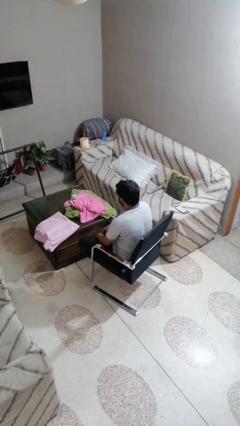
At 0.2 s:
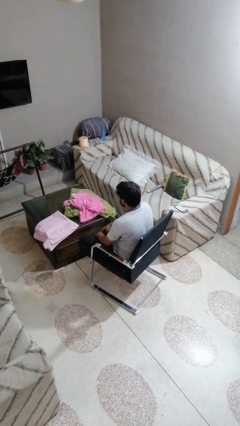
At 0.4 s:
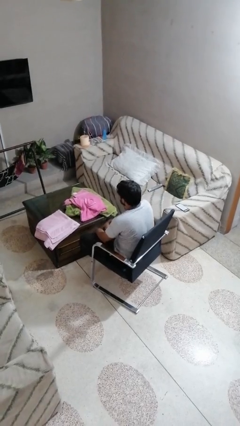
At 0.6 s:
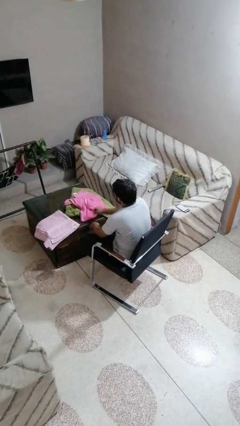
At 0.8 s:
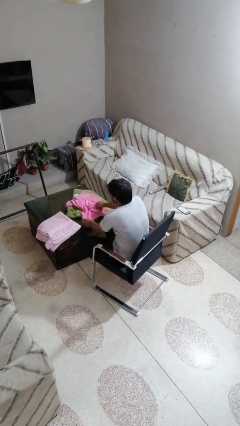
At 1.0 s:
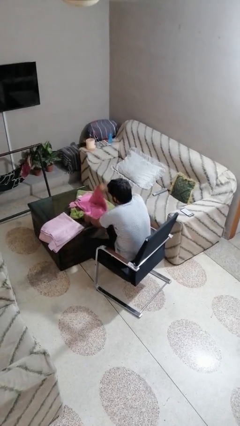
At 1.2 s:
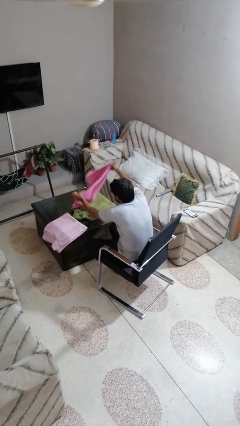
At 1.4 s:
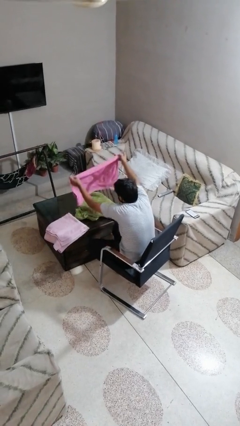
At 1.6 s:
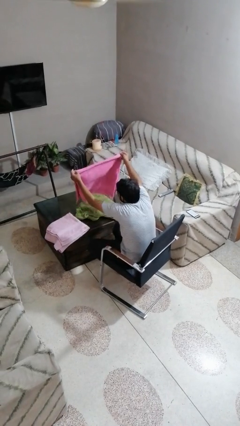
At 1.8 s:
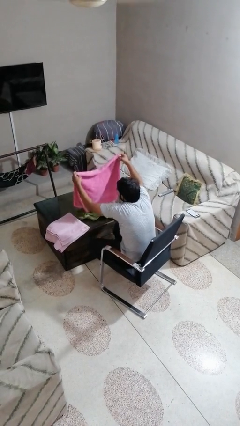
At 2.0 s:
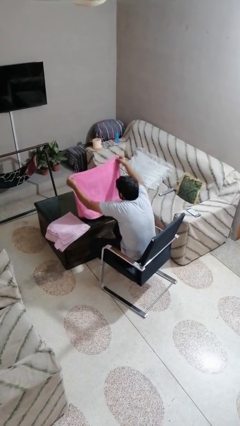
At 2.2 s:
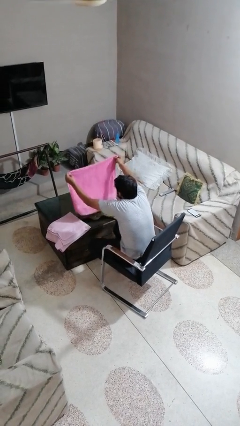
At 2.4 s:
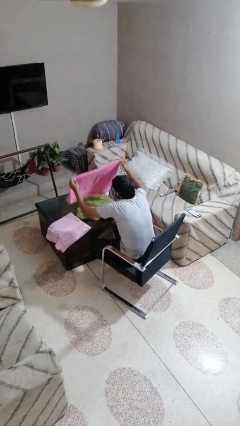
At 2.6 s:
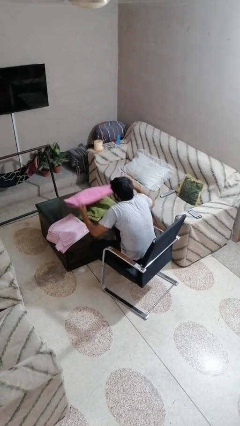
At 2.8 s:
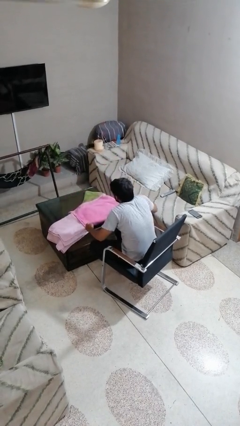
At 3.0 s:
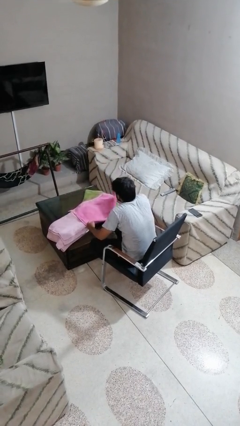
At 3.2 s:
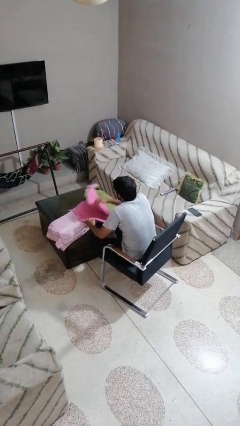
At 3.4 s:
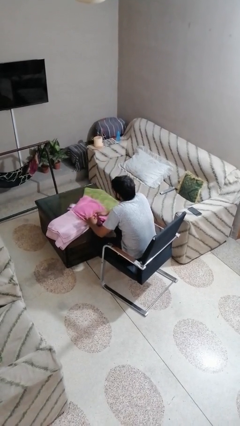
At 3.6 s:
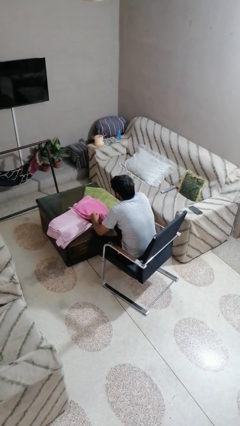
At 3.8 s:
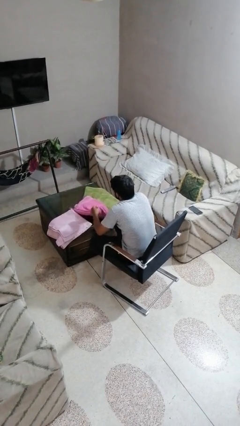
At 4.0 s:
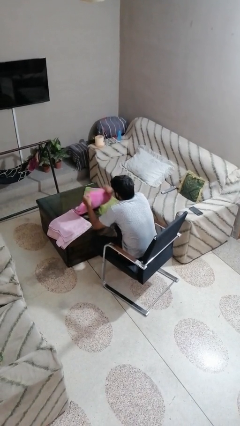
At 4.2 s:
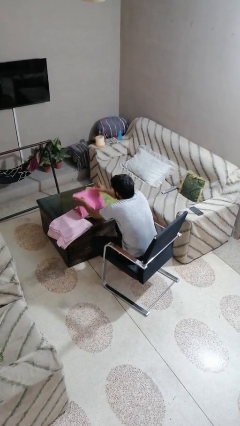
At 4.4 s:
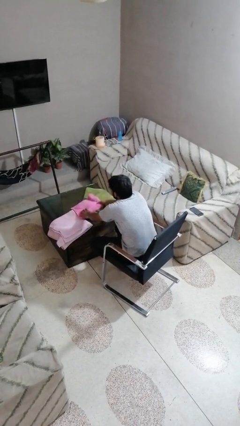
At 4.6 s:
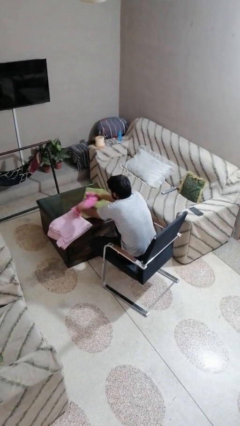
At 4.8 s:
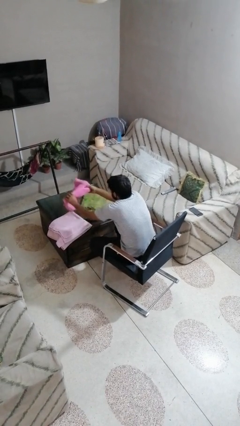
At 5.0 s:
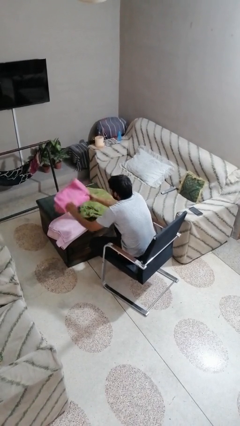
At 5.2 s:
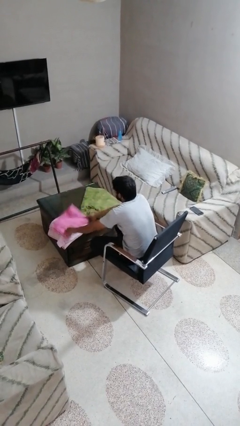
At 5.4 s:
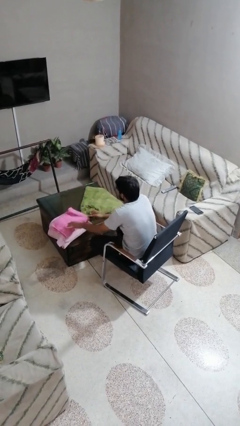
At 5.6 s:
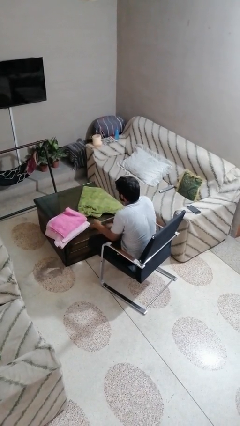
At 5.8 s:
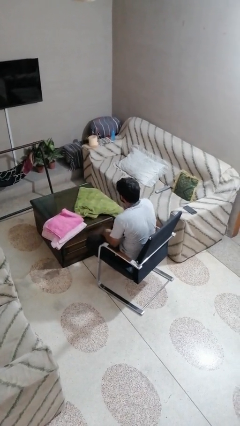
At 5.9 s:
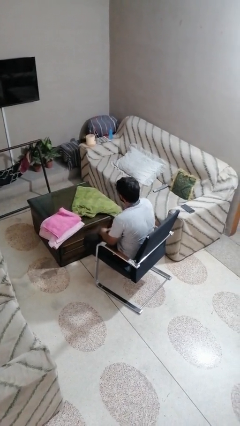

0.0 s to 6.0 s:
person folds towel

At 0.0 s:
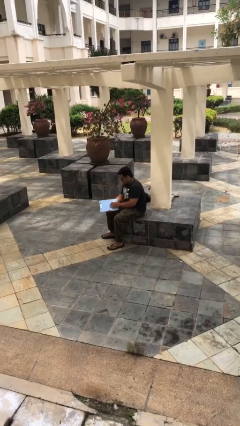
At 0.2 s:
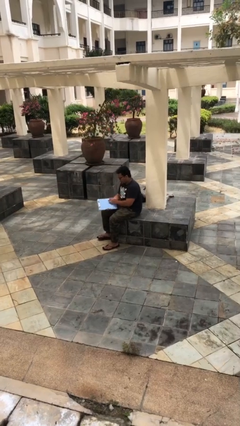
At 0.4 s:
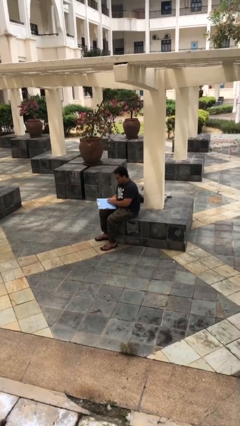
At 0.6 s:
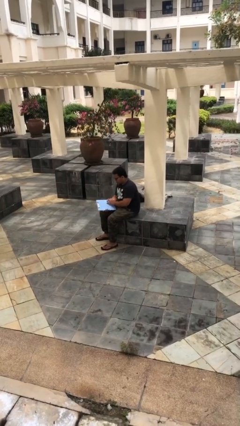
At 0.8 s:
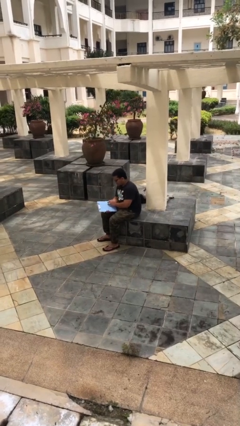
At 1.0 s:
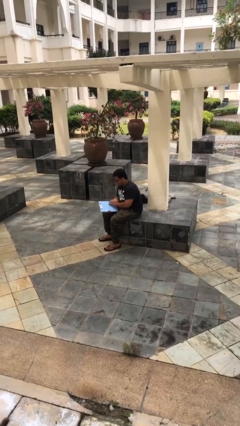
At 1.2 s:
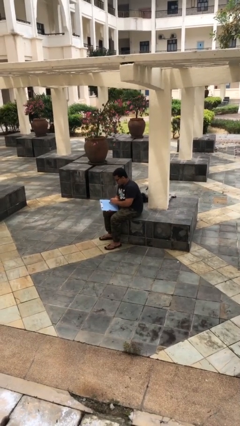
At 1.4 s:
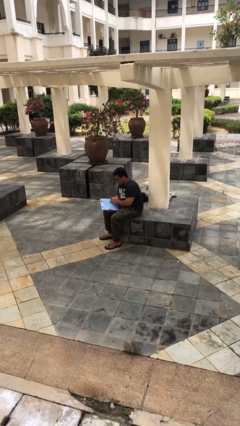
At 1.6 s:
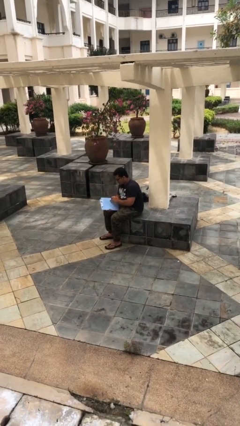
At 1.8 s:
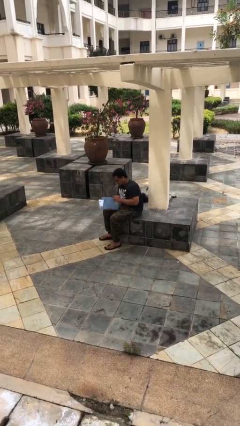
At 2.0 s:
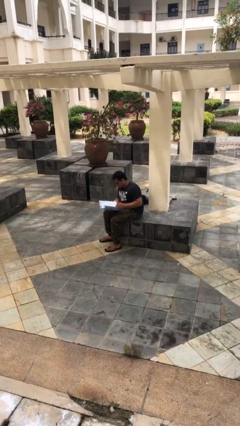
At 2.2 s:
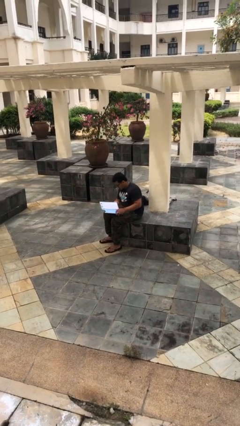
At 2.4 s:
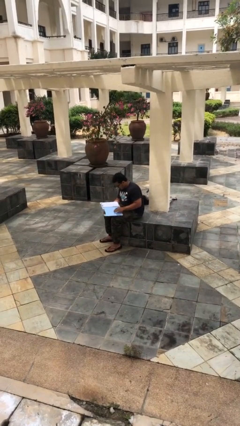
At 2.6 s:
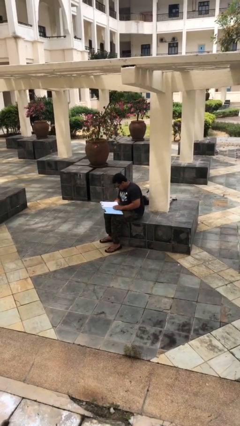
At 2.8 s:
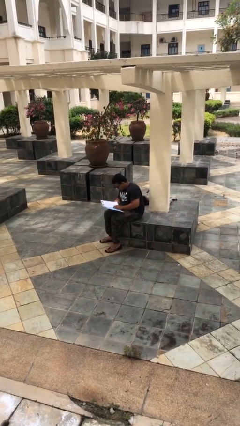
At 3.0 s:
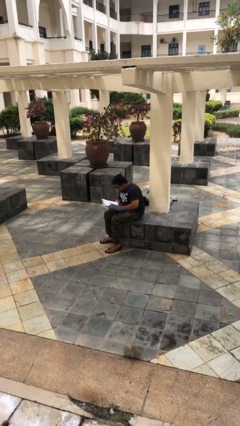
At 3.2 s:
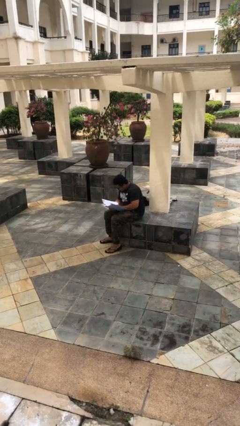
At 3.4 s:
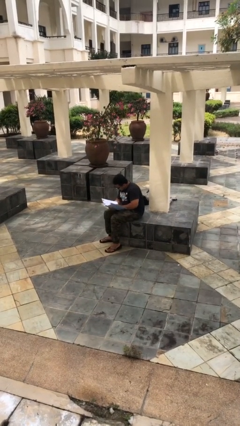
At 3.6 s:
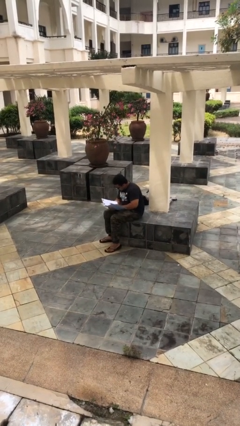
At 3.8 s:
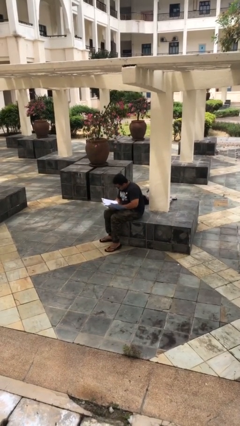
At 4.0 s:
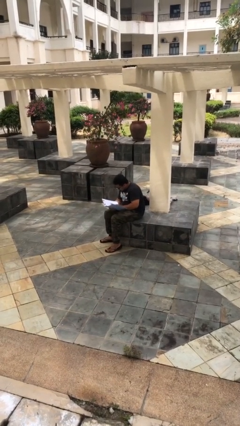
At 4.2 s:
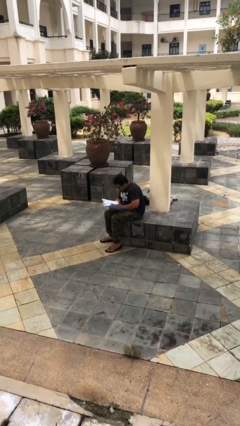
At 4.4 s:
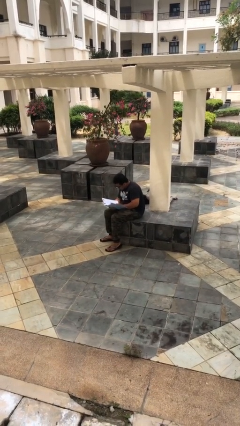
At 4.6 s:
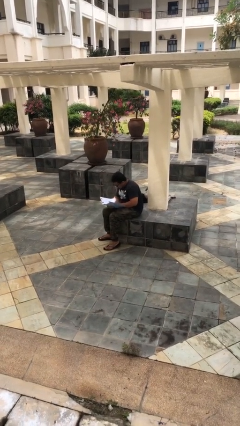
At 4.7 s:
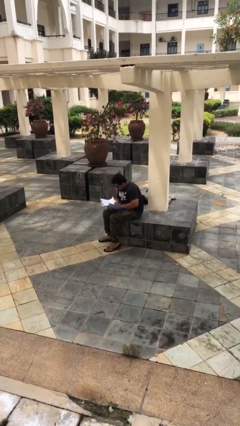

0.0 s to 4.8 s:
person reads document

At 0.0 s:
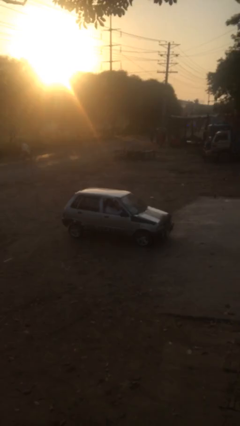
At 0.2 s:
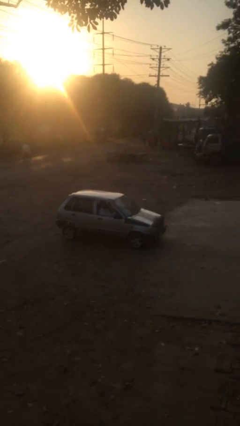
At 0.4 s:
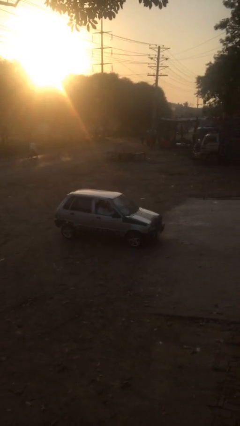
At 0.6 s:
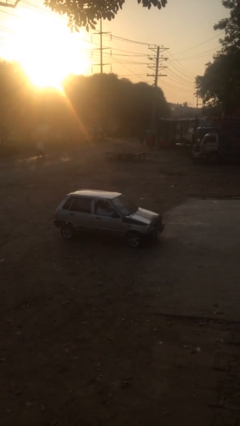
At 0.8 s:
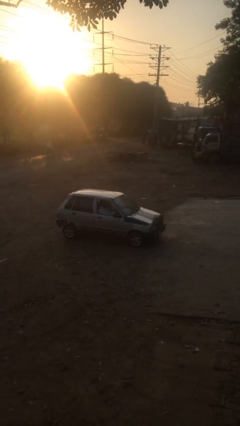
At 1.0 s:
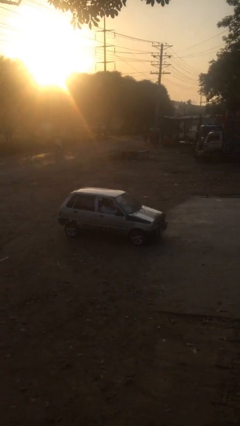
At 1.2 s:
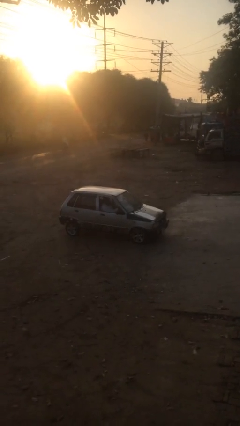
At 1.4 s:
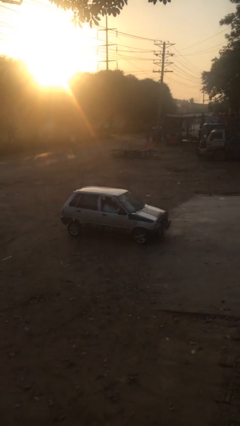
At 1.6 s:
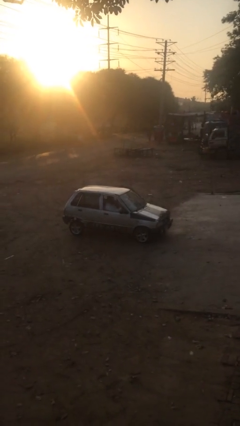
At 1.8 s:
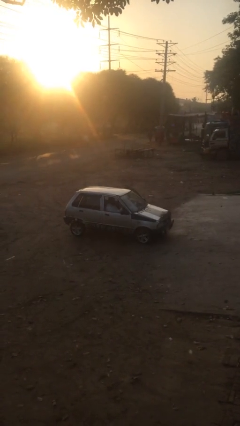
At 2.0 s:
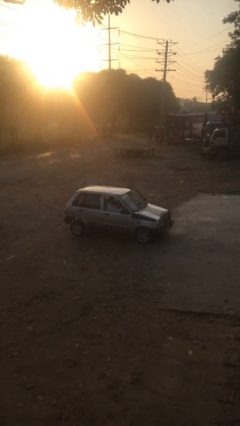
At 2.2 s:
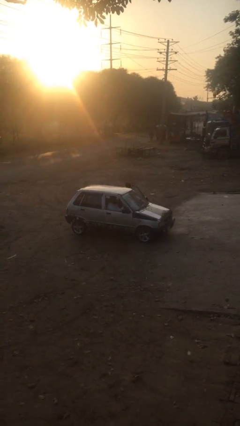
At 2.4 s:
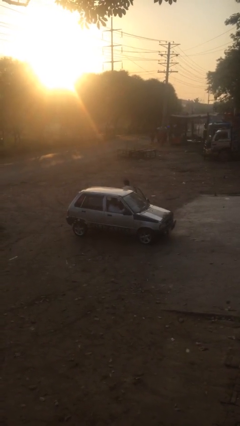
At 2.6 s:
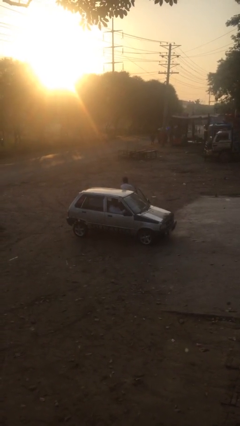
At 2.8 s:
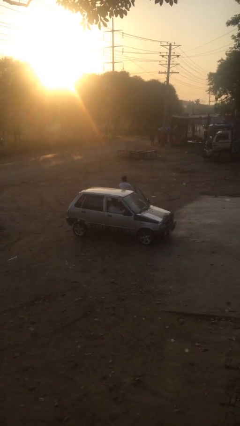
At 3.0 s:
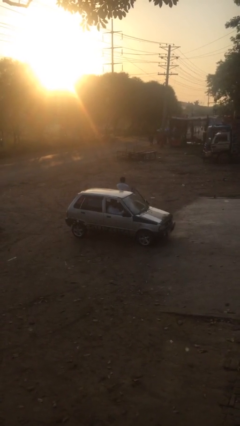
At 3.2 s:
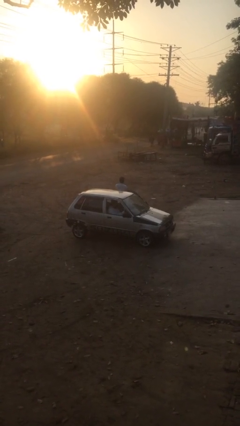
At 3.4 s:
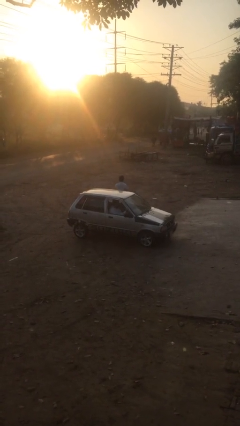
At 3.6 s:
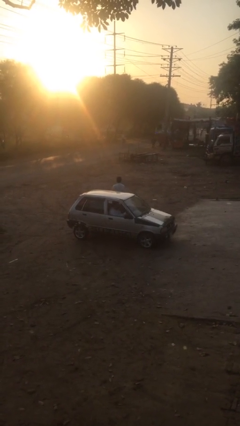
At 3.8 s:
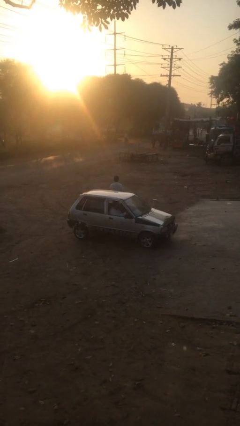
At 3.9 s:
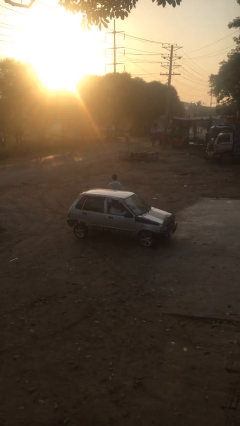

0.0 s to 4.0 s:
car drops off person

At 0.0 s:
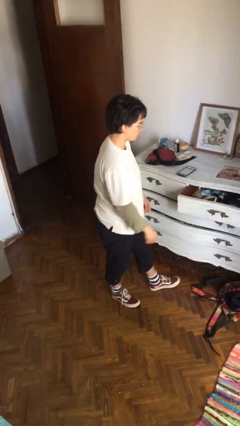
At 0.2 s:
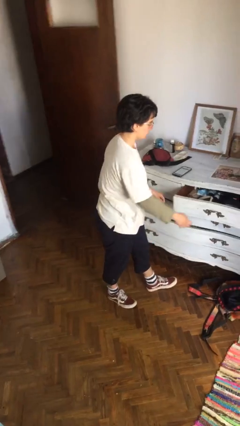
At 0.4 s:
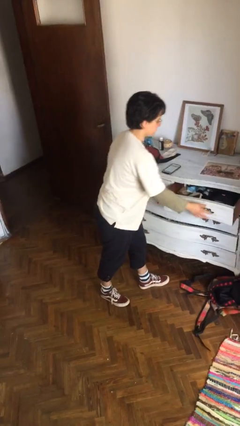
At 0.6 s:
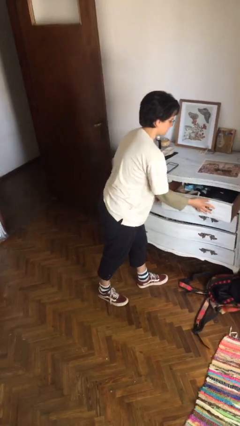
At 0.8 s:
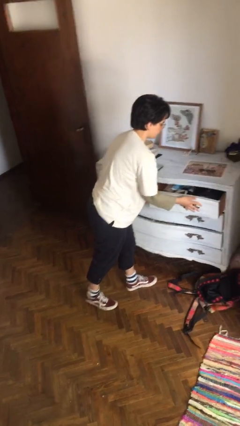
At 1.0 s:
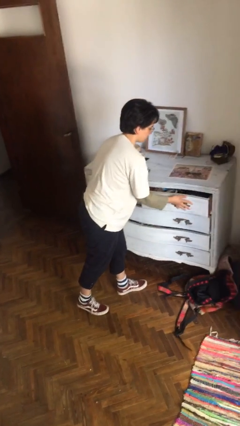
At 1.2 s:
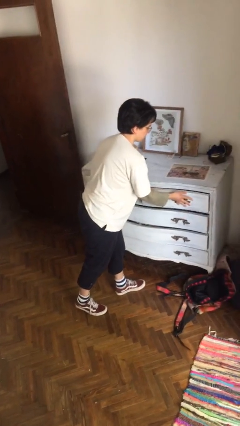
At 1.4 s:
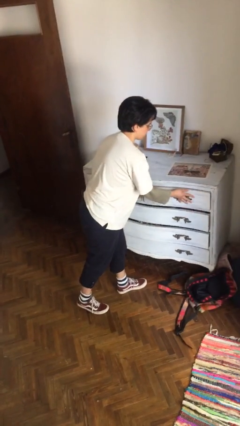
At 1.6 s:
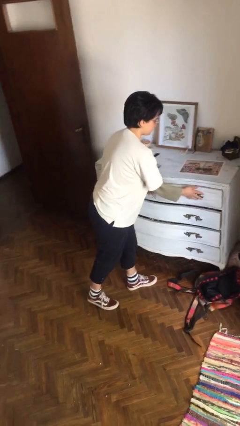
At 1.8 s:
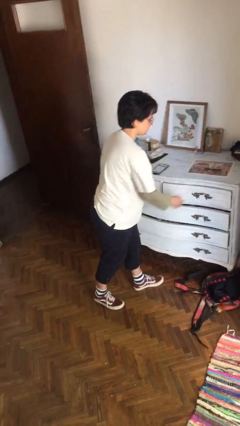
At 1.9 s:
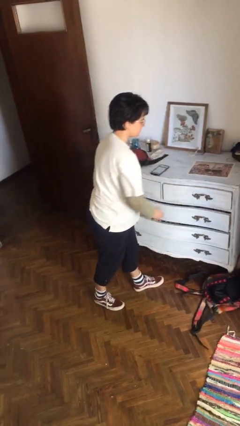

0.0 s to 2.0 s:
person closes dresser drawer

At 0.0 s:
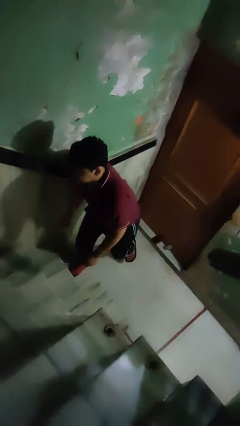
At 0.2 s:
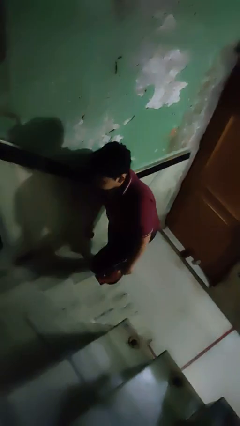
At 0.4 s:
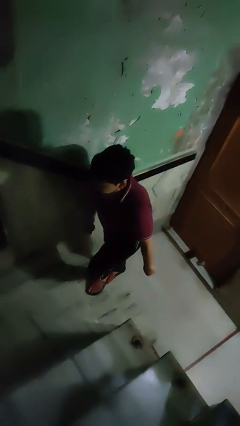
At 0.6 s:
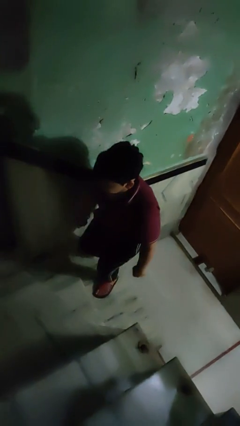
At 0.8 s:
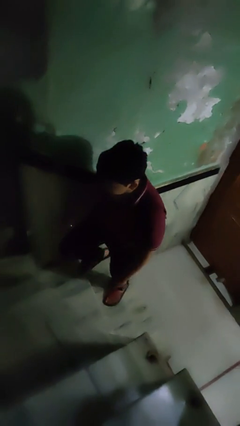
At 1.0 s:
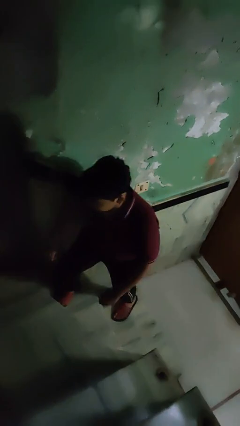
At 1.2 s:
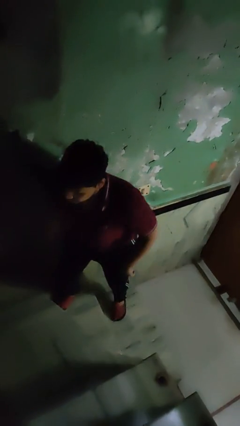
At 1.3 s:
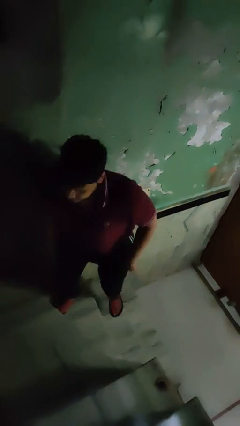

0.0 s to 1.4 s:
person climbs up stairs
